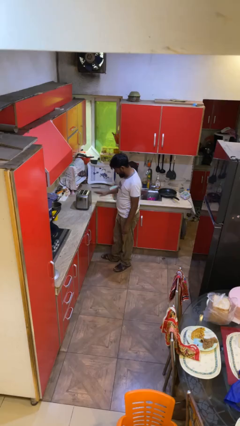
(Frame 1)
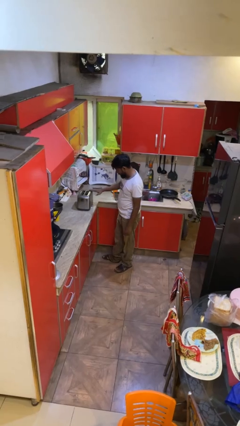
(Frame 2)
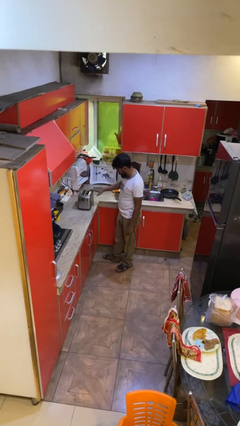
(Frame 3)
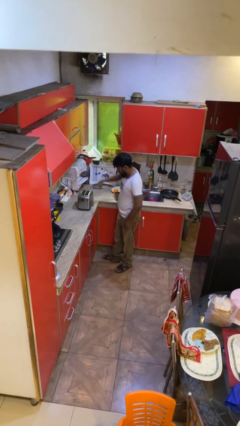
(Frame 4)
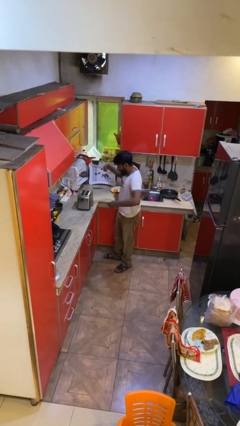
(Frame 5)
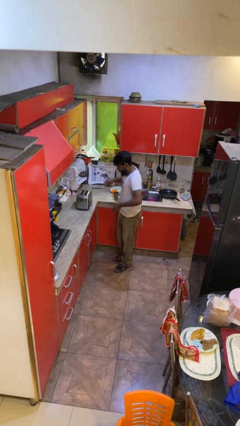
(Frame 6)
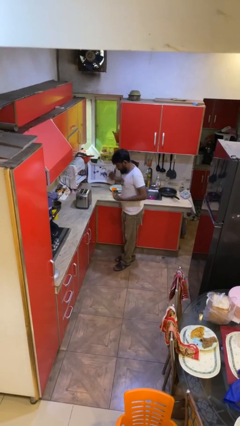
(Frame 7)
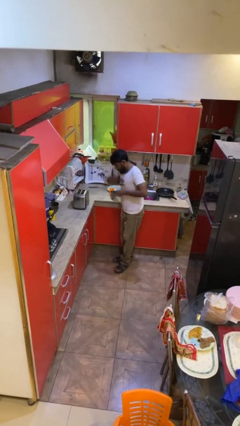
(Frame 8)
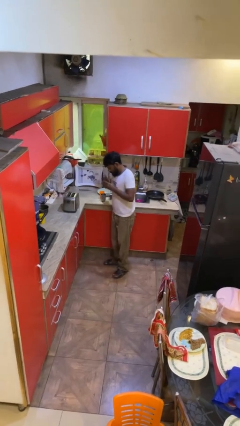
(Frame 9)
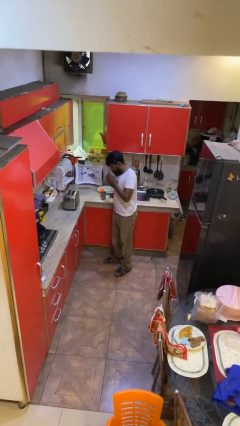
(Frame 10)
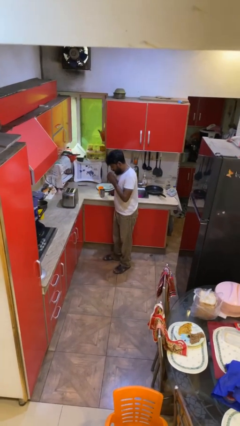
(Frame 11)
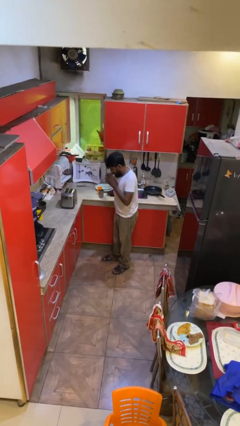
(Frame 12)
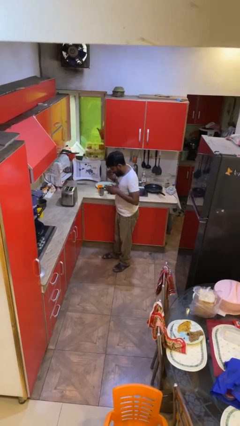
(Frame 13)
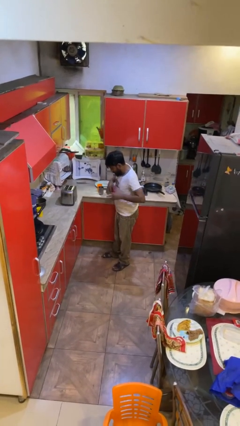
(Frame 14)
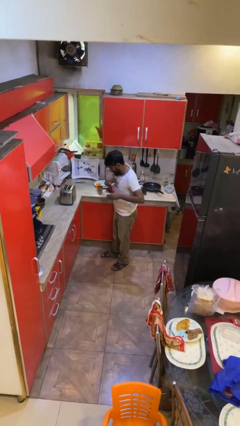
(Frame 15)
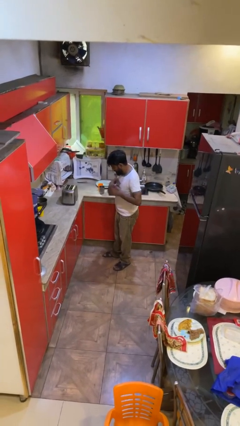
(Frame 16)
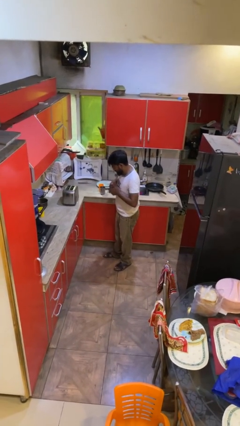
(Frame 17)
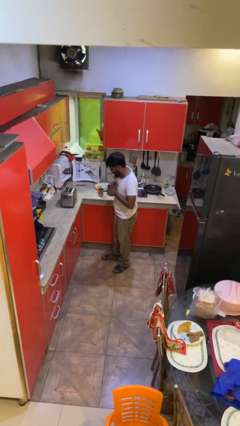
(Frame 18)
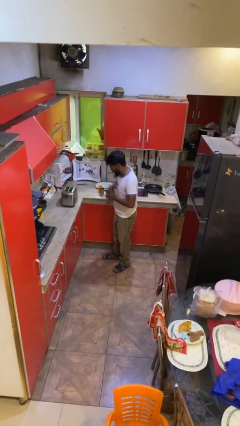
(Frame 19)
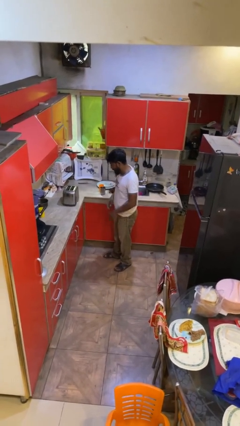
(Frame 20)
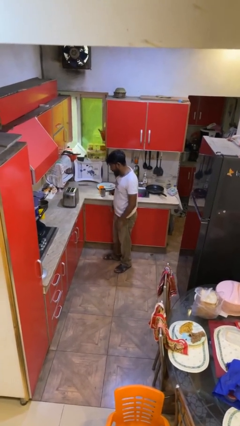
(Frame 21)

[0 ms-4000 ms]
person burns hand

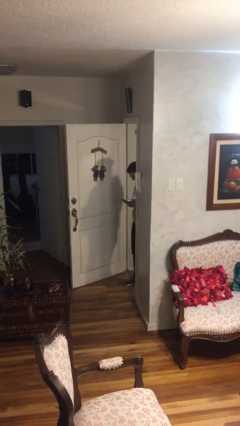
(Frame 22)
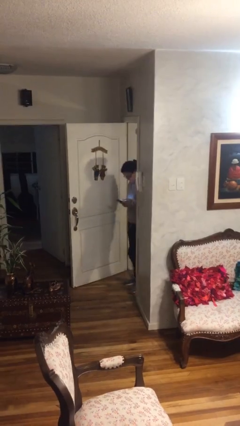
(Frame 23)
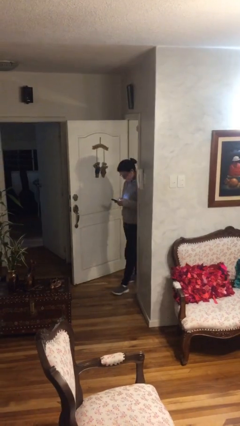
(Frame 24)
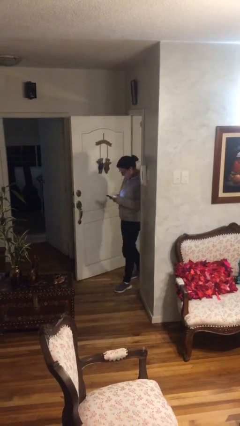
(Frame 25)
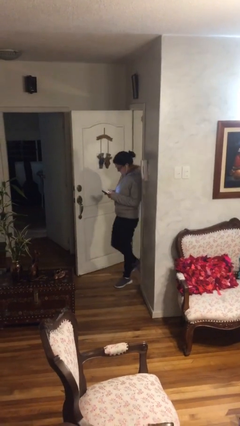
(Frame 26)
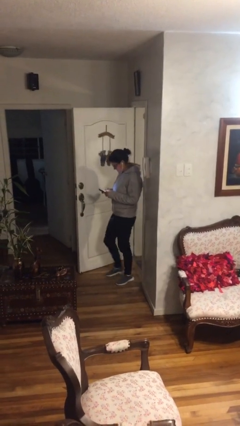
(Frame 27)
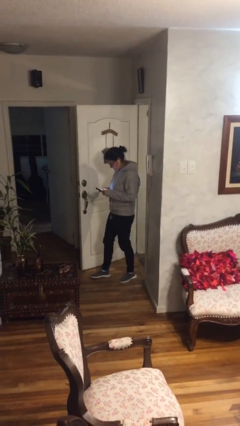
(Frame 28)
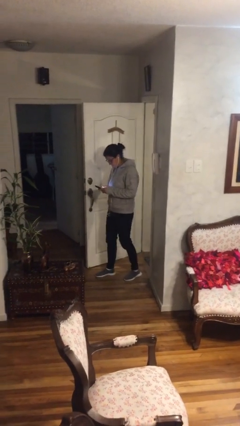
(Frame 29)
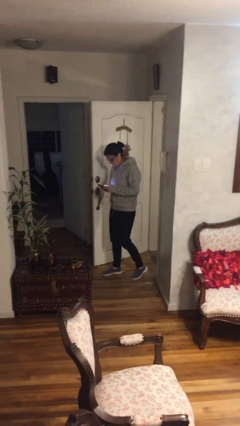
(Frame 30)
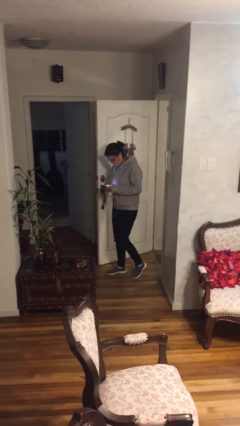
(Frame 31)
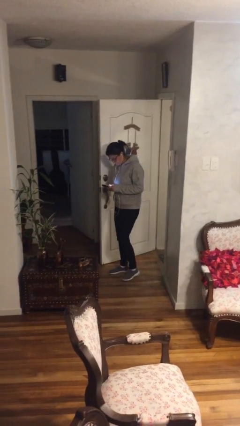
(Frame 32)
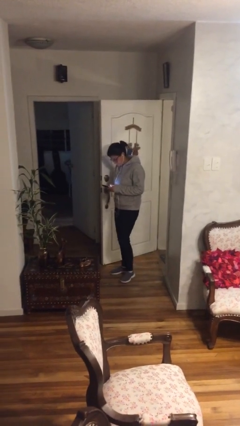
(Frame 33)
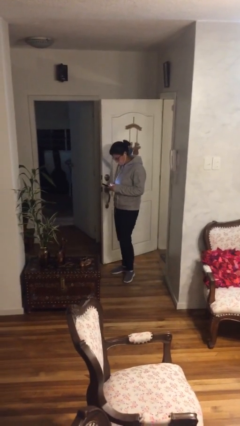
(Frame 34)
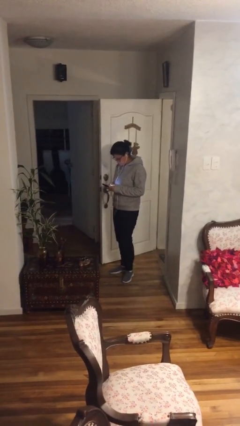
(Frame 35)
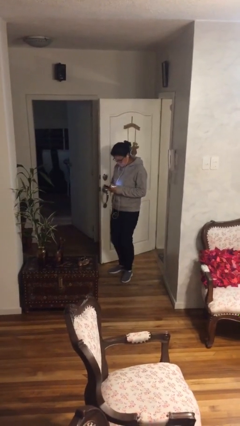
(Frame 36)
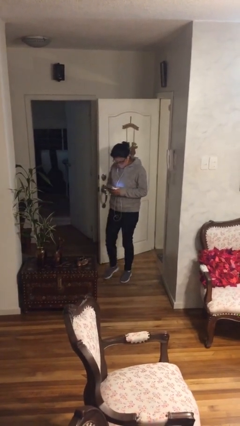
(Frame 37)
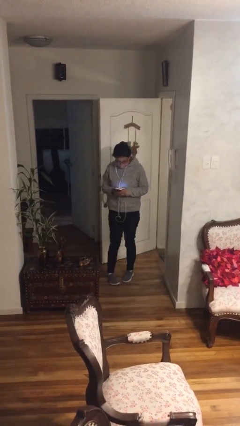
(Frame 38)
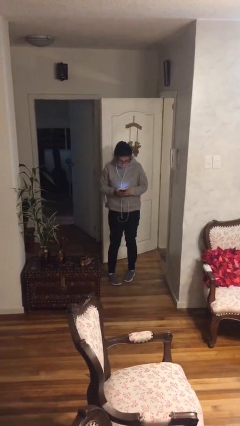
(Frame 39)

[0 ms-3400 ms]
person enters scene through structure

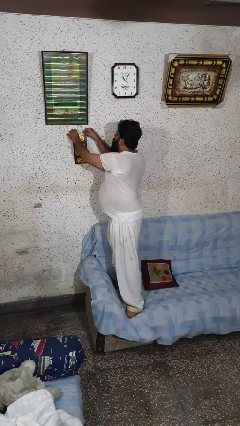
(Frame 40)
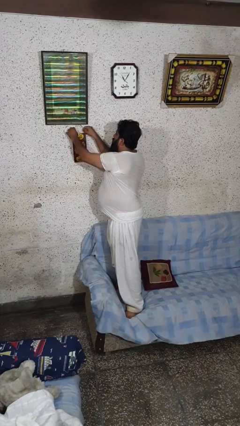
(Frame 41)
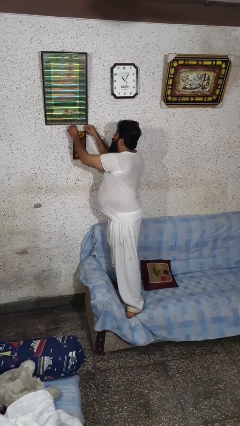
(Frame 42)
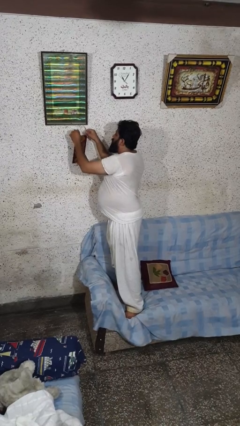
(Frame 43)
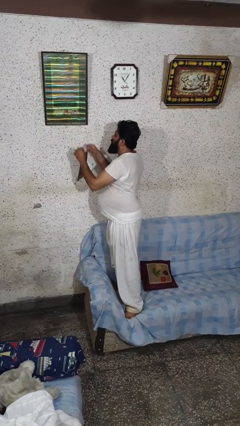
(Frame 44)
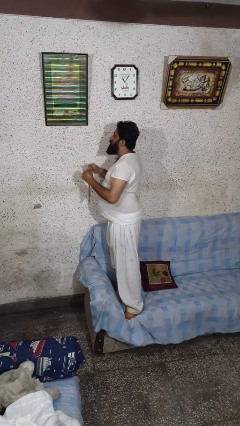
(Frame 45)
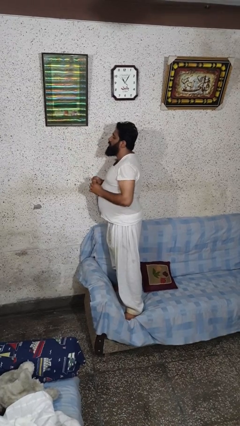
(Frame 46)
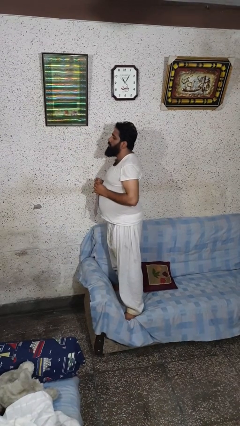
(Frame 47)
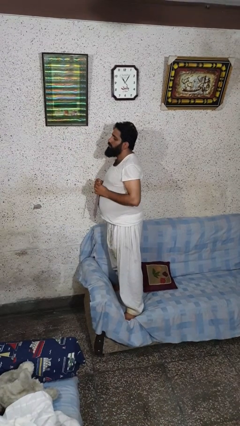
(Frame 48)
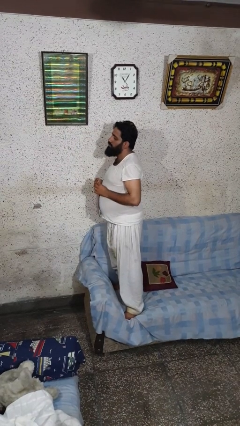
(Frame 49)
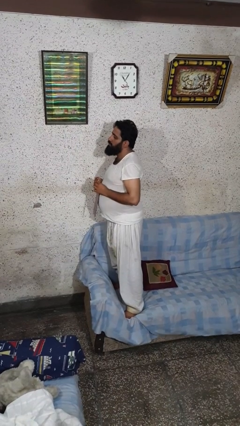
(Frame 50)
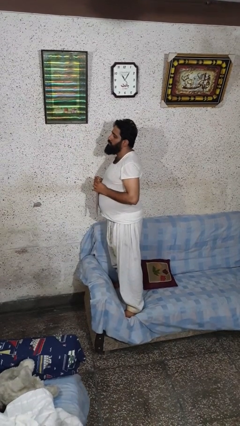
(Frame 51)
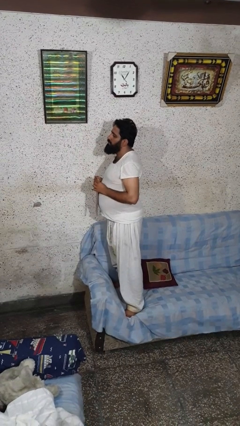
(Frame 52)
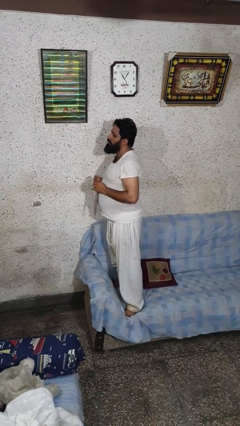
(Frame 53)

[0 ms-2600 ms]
person takes down picture frame

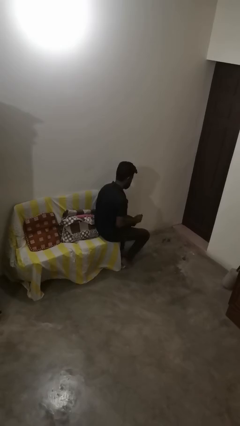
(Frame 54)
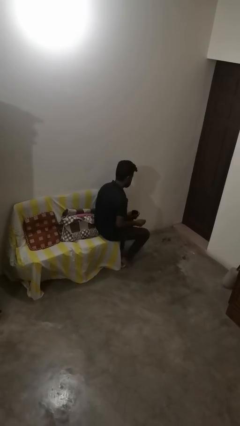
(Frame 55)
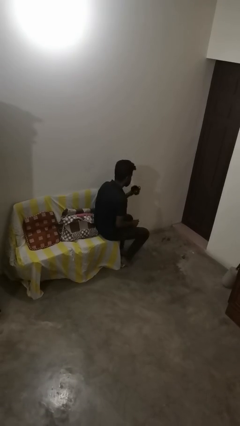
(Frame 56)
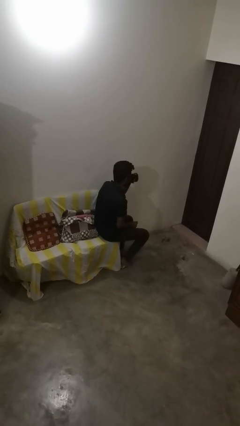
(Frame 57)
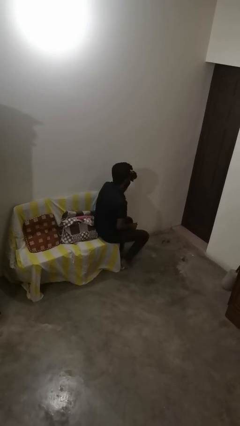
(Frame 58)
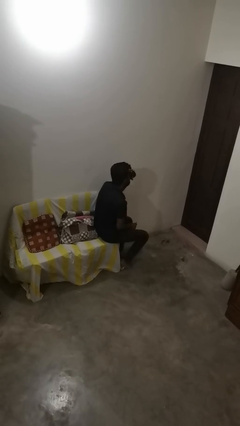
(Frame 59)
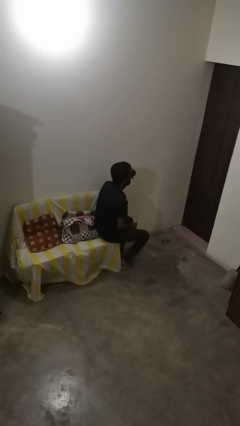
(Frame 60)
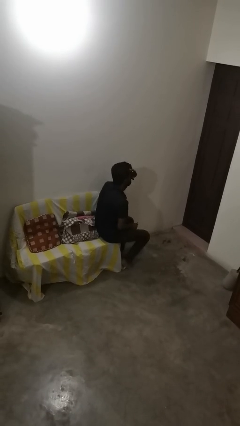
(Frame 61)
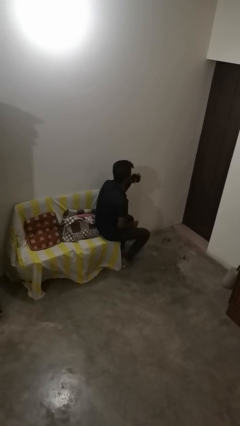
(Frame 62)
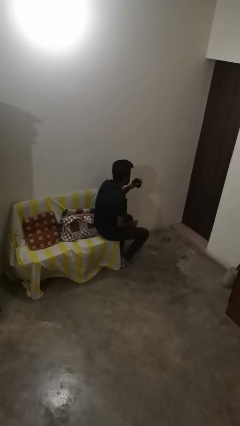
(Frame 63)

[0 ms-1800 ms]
person drinks from mug

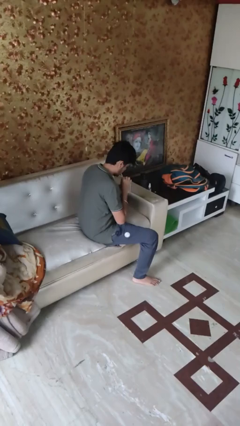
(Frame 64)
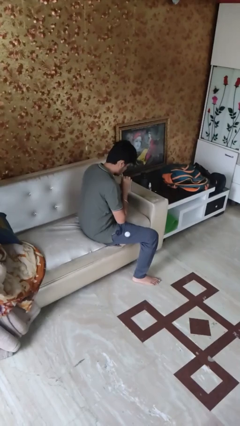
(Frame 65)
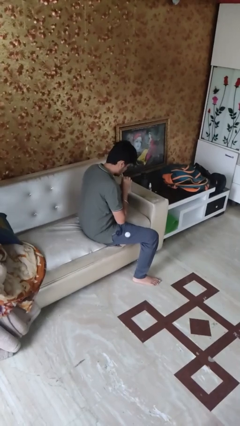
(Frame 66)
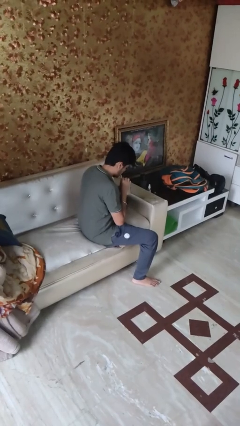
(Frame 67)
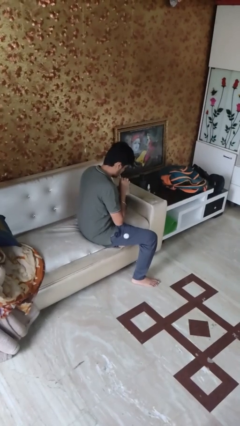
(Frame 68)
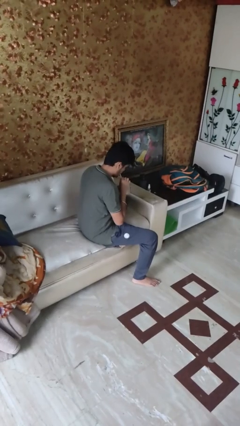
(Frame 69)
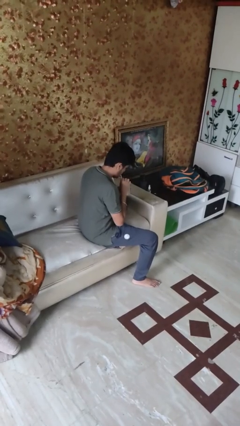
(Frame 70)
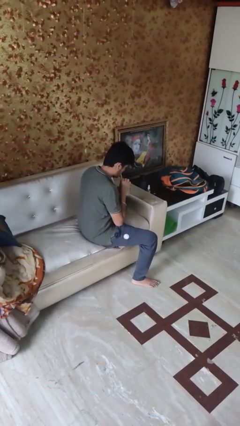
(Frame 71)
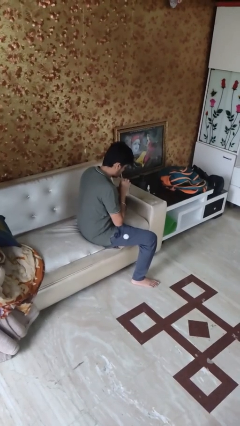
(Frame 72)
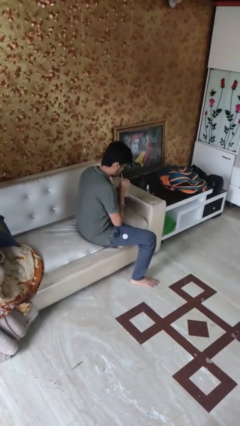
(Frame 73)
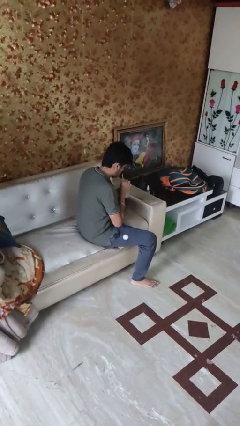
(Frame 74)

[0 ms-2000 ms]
person drinks from straw

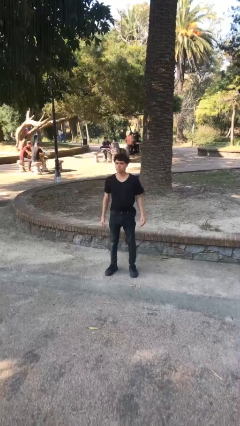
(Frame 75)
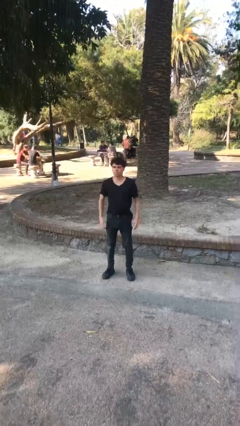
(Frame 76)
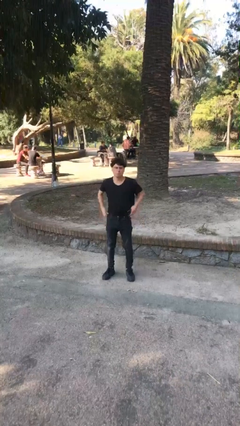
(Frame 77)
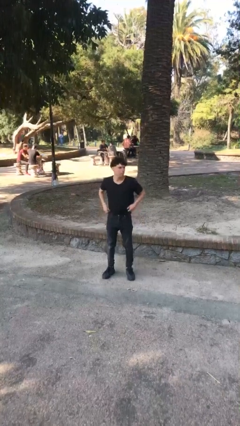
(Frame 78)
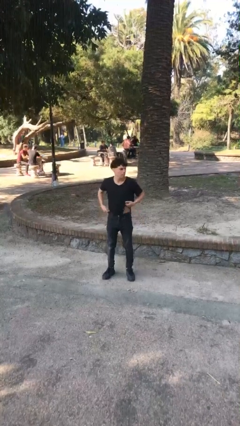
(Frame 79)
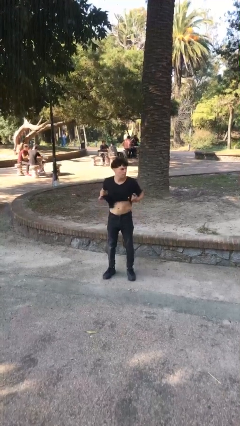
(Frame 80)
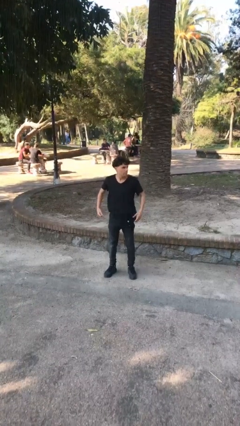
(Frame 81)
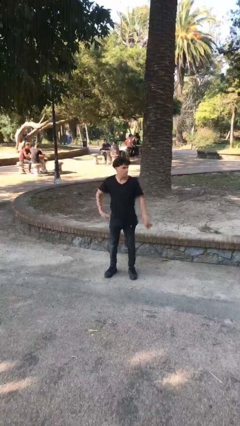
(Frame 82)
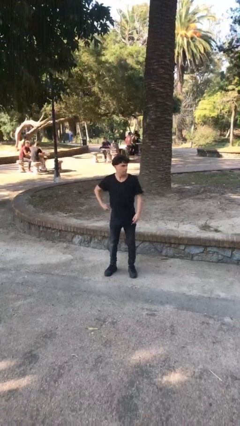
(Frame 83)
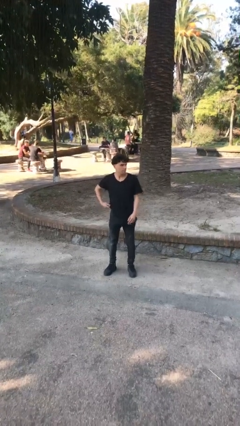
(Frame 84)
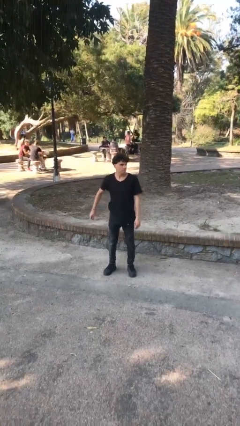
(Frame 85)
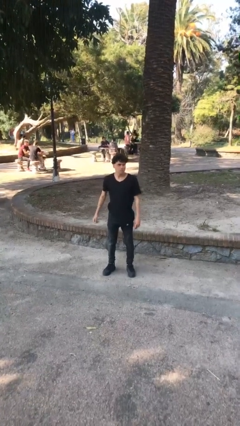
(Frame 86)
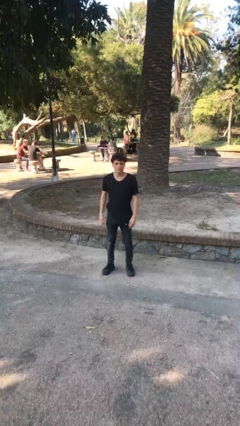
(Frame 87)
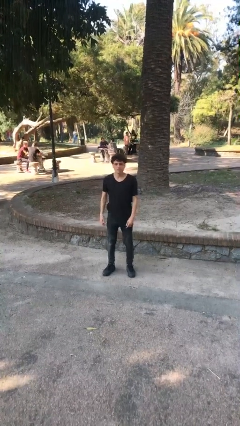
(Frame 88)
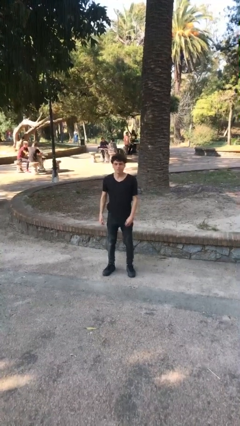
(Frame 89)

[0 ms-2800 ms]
person untucks shirt

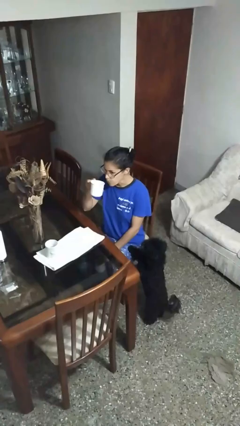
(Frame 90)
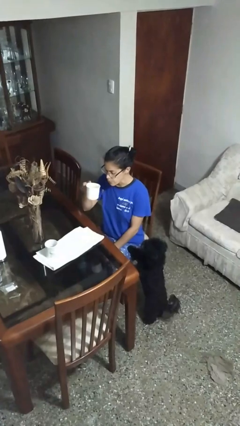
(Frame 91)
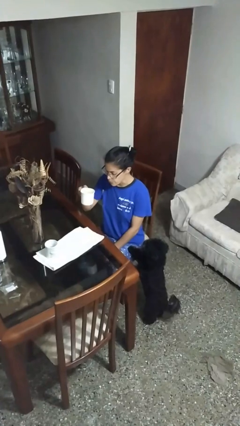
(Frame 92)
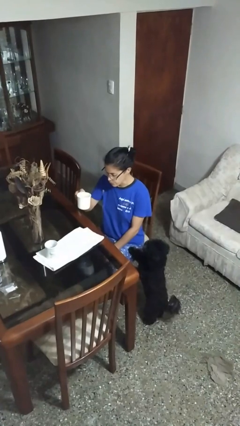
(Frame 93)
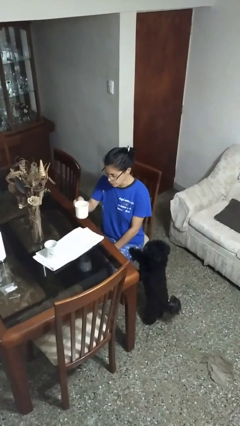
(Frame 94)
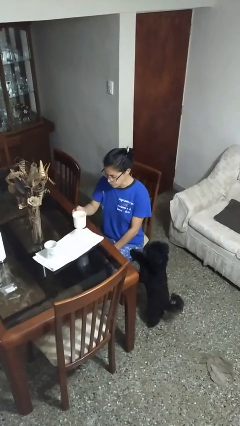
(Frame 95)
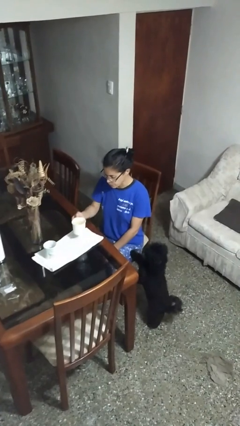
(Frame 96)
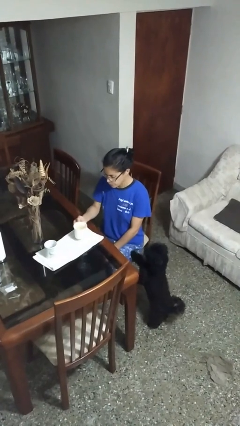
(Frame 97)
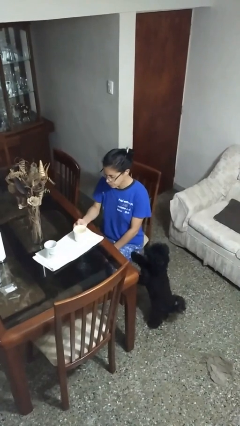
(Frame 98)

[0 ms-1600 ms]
person puts down object on table
